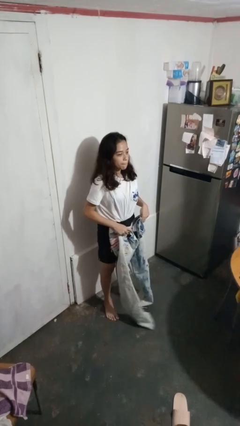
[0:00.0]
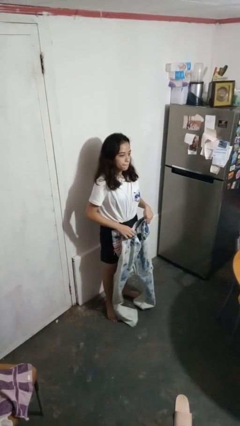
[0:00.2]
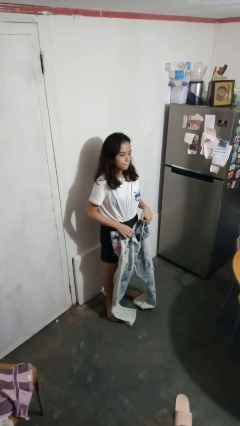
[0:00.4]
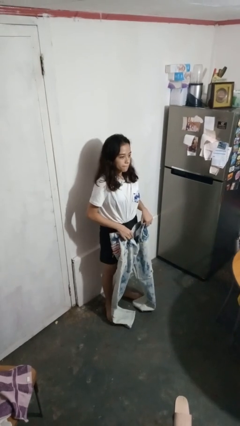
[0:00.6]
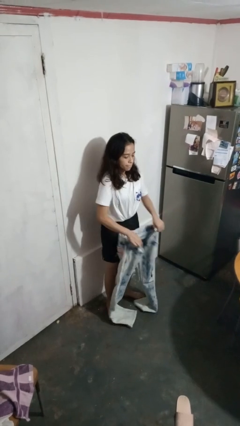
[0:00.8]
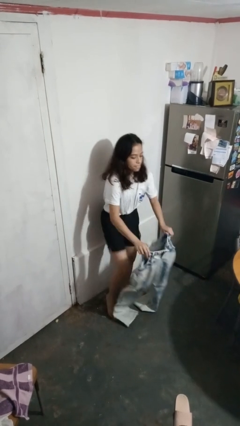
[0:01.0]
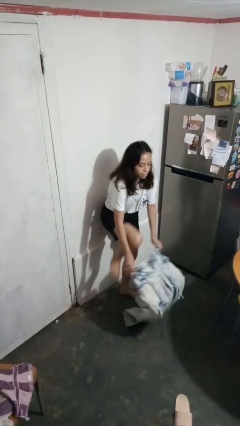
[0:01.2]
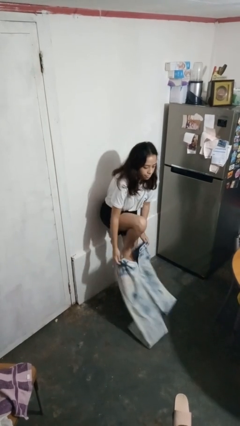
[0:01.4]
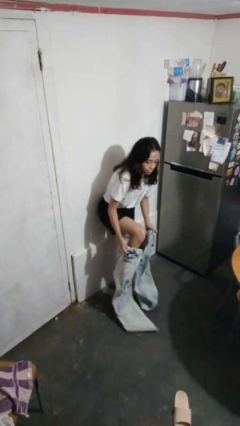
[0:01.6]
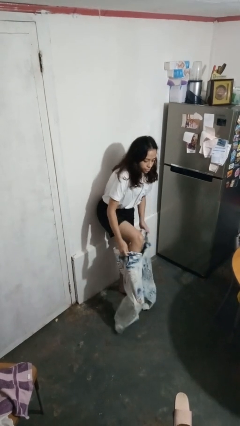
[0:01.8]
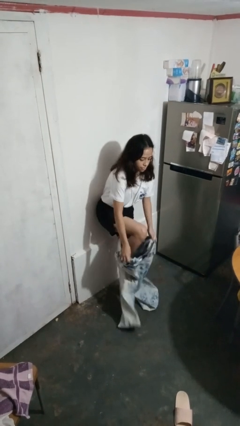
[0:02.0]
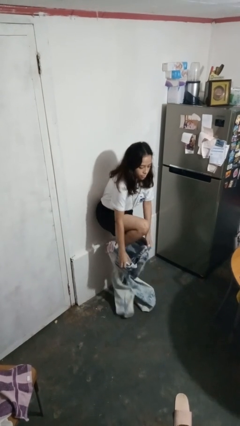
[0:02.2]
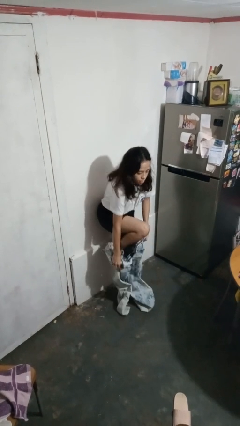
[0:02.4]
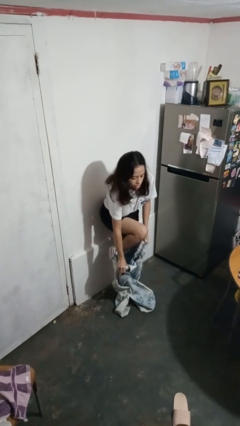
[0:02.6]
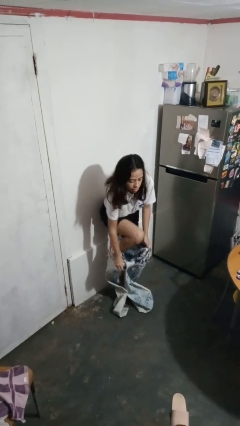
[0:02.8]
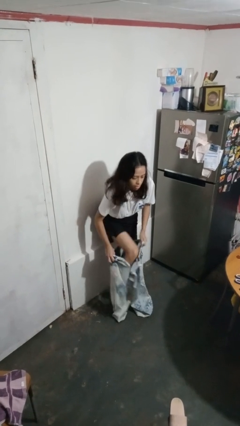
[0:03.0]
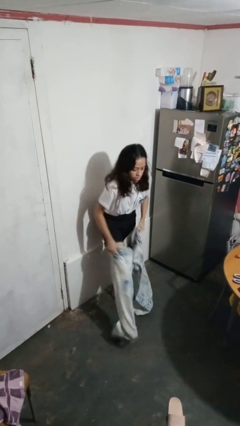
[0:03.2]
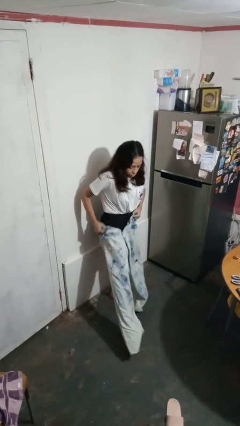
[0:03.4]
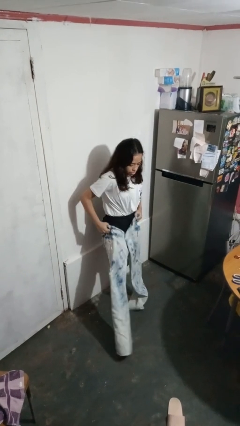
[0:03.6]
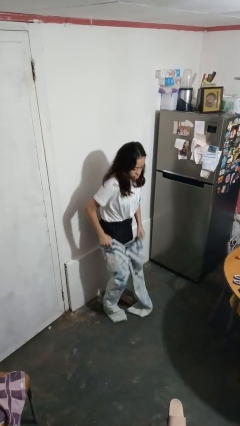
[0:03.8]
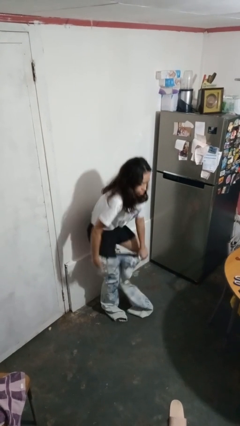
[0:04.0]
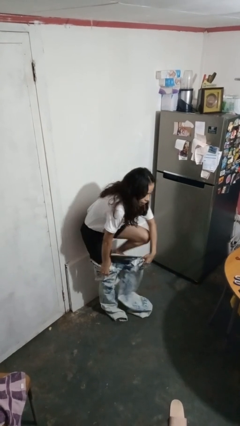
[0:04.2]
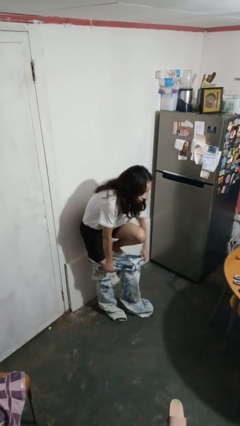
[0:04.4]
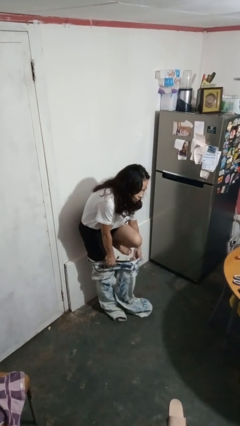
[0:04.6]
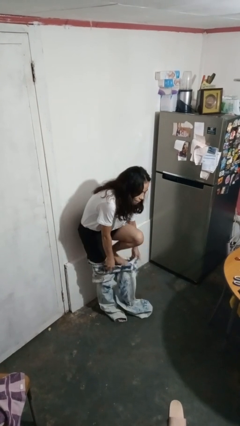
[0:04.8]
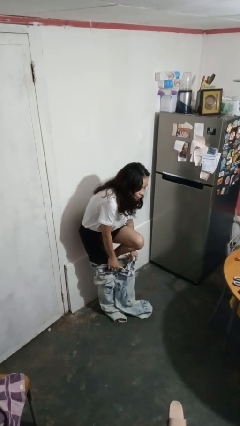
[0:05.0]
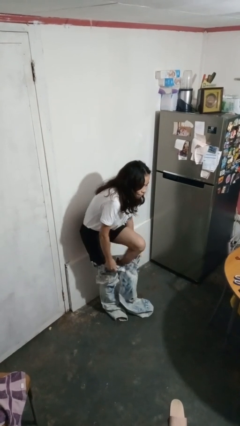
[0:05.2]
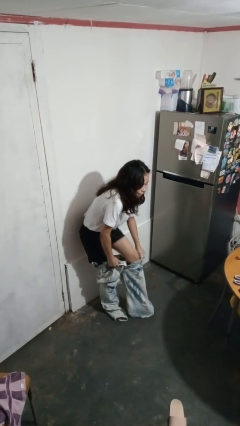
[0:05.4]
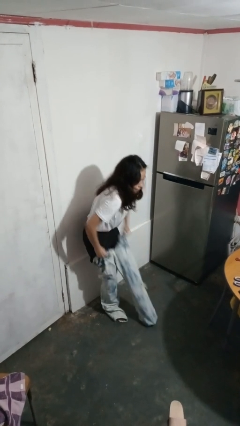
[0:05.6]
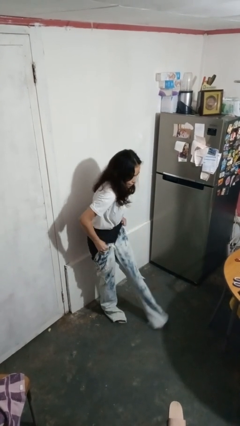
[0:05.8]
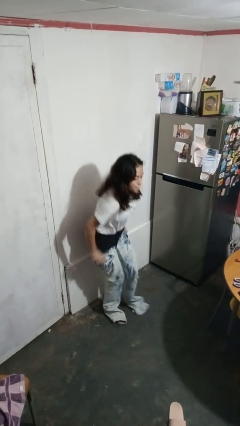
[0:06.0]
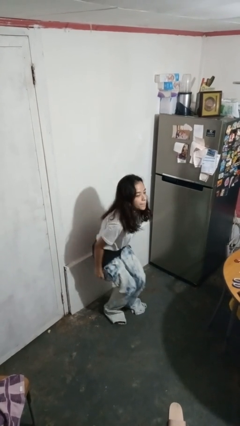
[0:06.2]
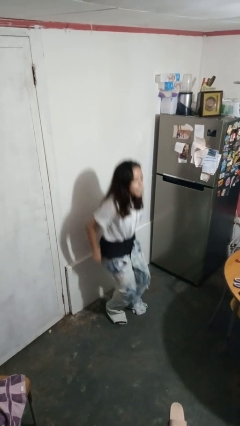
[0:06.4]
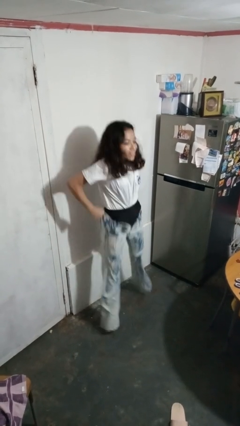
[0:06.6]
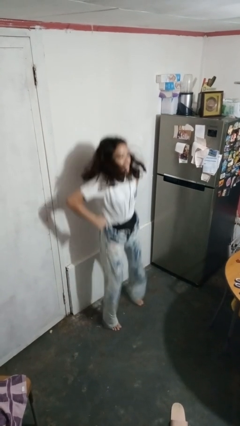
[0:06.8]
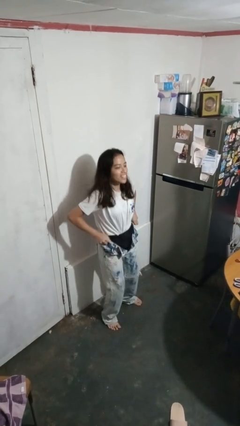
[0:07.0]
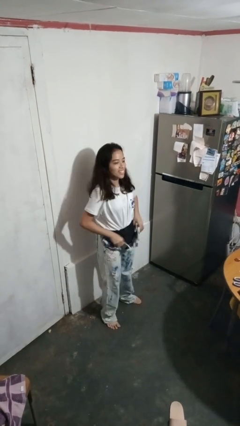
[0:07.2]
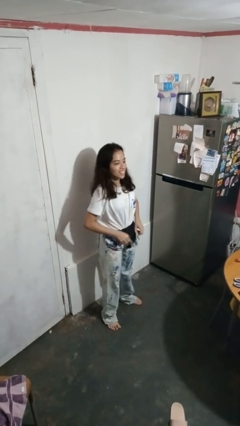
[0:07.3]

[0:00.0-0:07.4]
person puts on pants

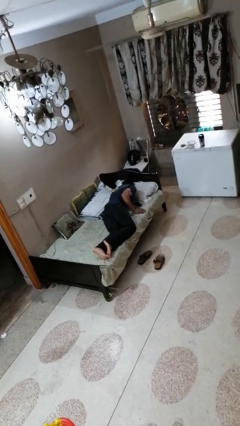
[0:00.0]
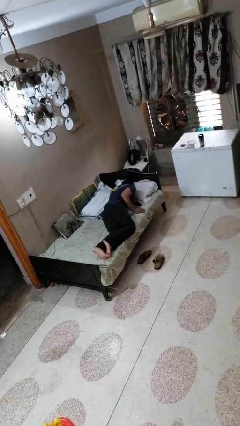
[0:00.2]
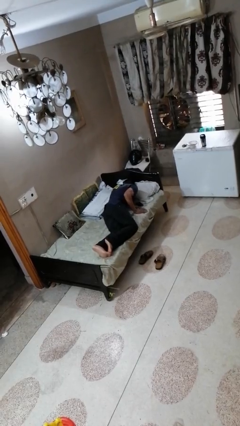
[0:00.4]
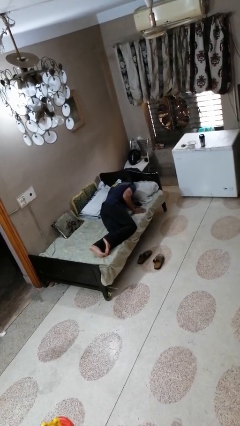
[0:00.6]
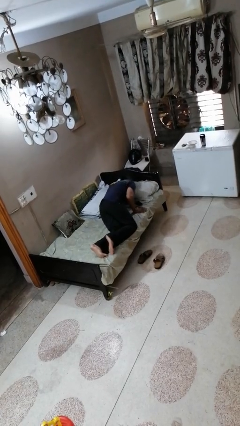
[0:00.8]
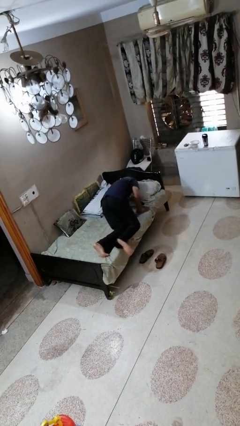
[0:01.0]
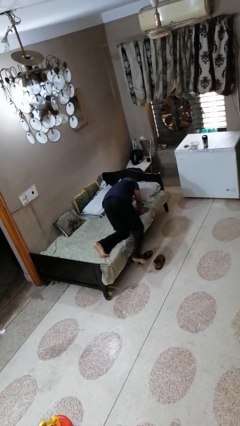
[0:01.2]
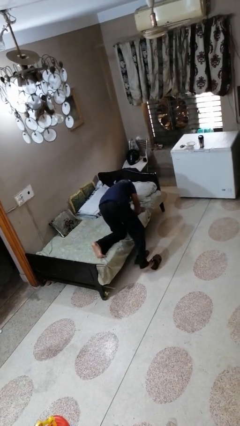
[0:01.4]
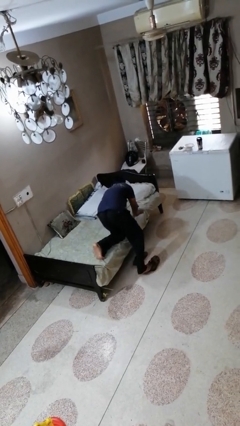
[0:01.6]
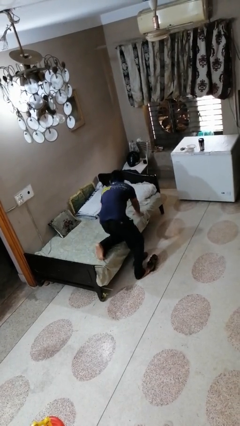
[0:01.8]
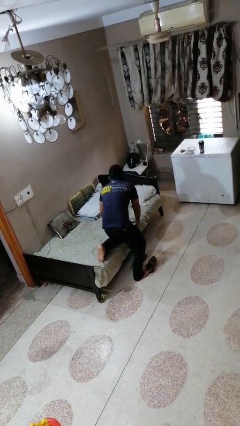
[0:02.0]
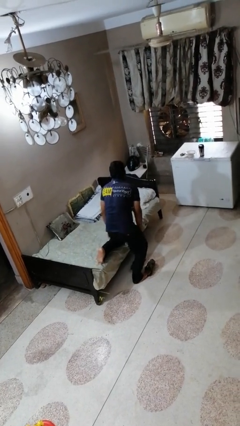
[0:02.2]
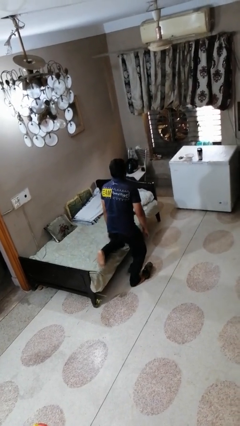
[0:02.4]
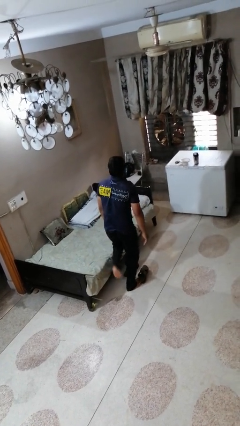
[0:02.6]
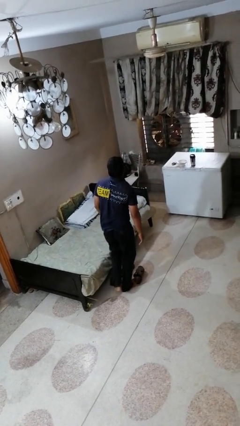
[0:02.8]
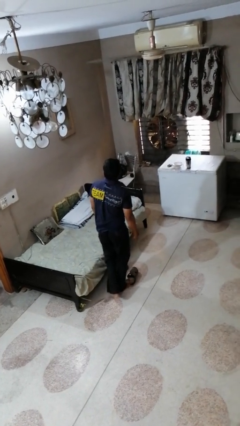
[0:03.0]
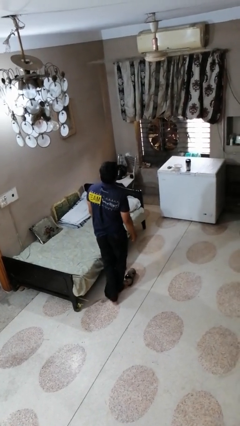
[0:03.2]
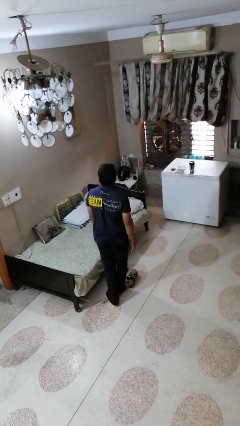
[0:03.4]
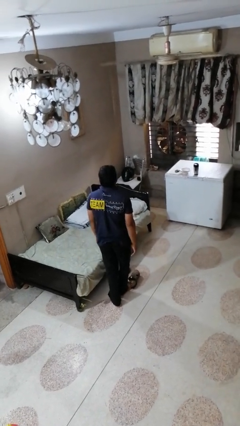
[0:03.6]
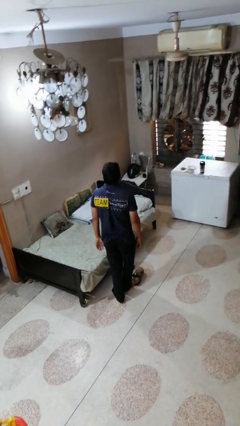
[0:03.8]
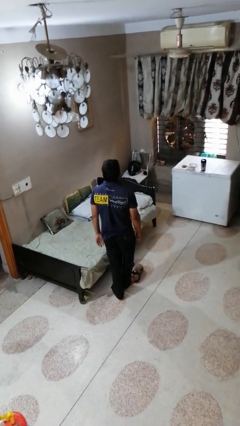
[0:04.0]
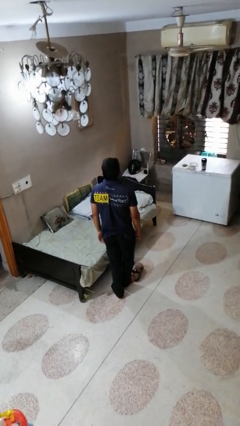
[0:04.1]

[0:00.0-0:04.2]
person stands up

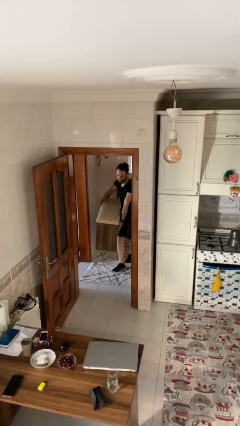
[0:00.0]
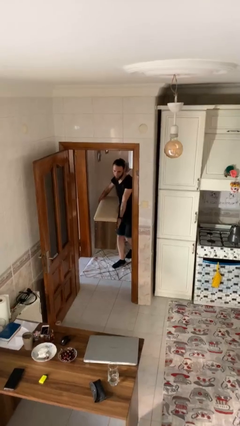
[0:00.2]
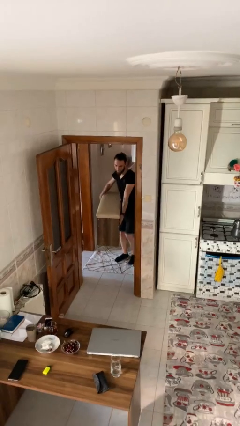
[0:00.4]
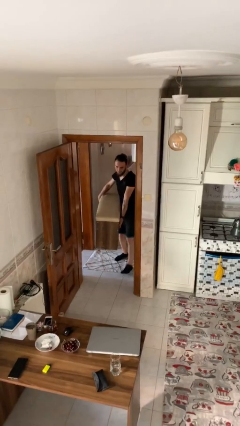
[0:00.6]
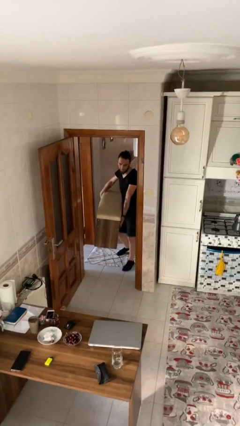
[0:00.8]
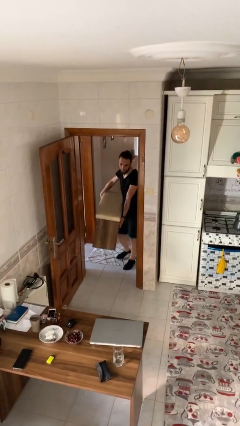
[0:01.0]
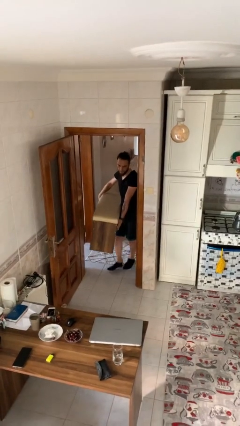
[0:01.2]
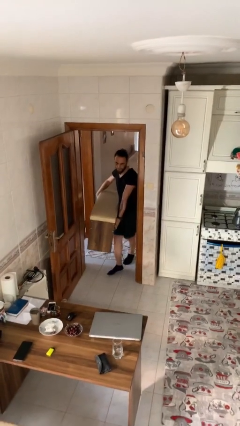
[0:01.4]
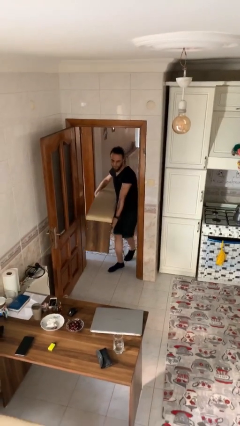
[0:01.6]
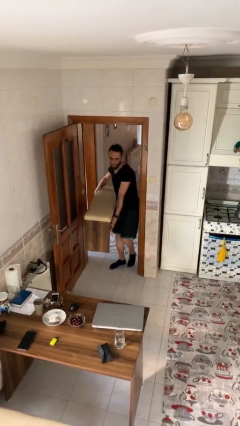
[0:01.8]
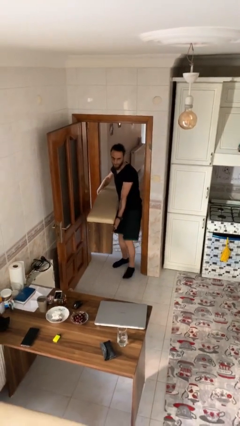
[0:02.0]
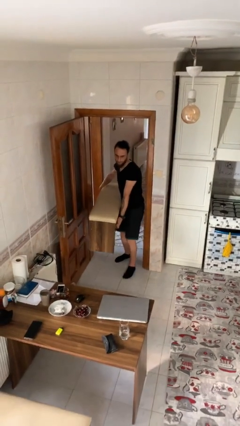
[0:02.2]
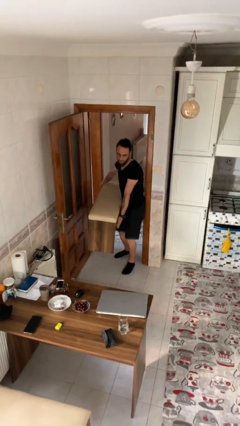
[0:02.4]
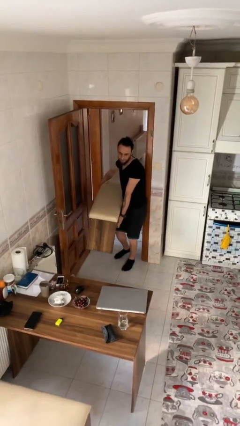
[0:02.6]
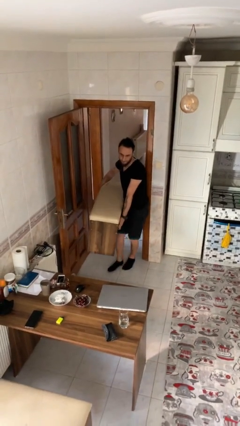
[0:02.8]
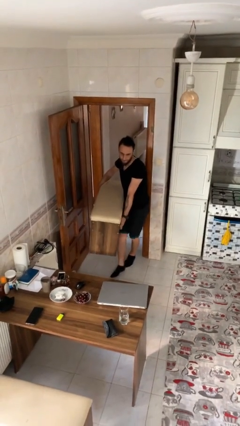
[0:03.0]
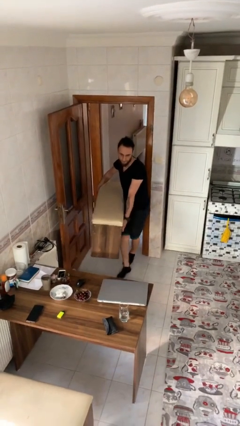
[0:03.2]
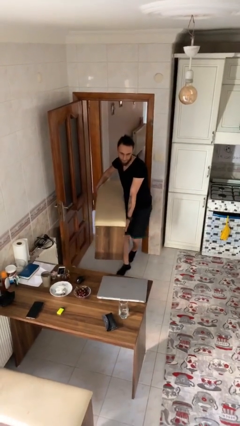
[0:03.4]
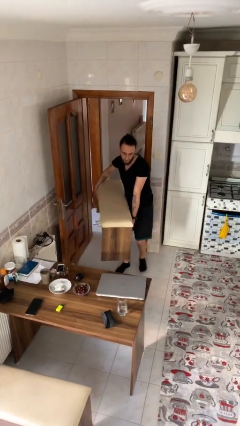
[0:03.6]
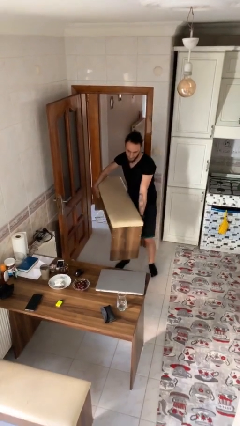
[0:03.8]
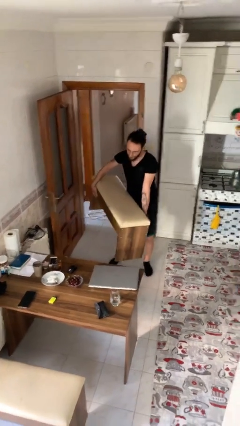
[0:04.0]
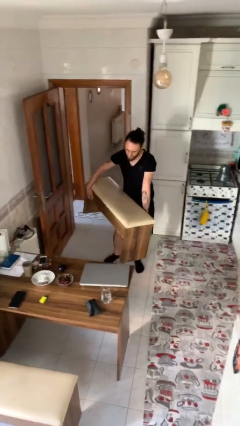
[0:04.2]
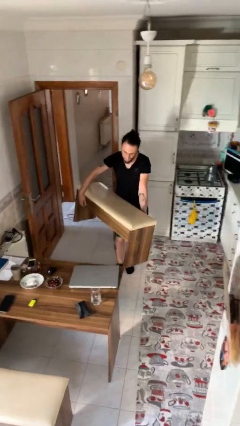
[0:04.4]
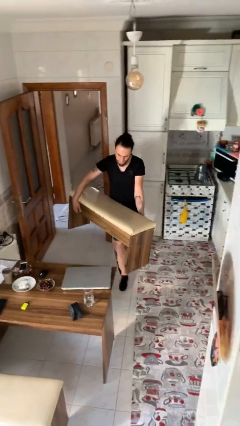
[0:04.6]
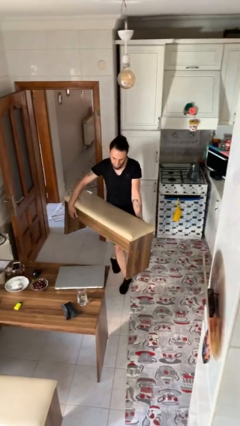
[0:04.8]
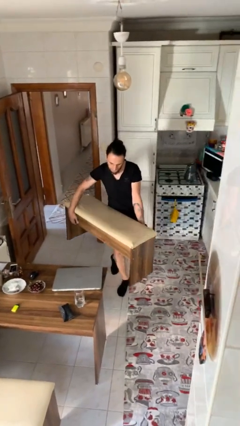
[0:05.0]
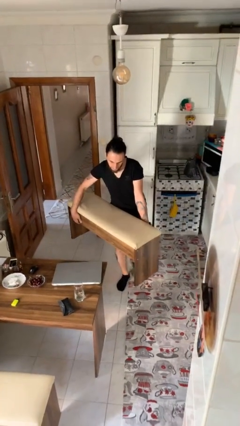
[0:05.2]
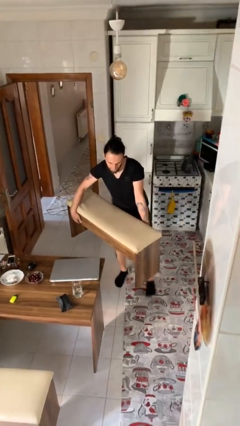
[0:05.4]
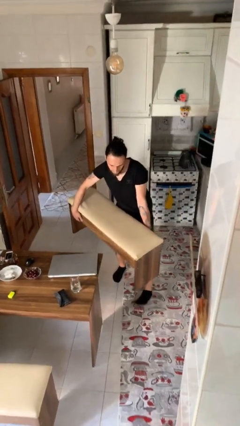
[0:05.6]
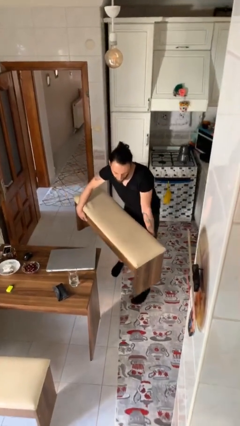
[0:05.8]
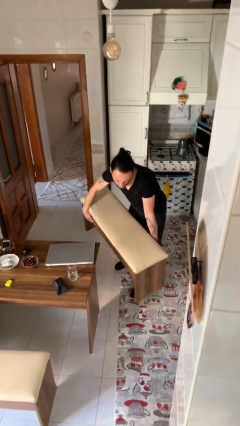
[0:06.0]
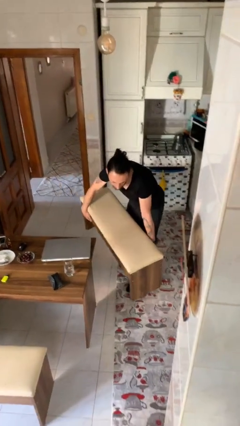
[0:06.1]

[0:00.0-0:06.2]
person carries heavy object
